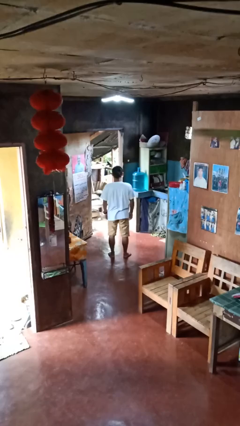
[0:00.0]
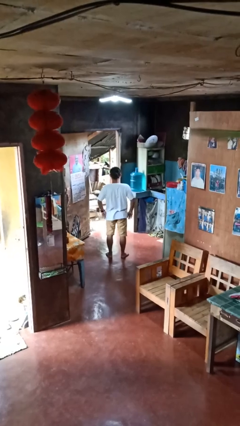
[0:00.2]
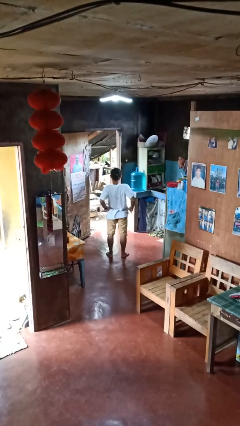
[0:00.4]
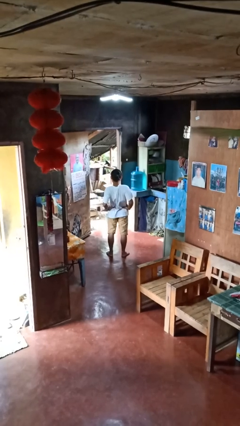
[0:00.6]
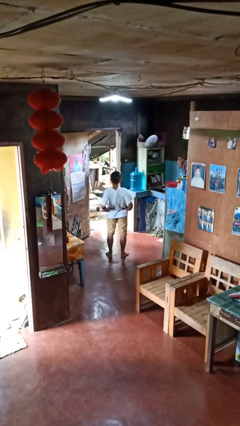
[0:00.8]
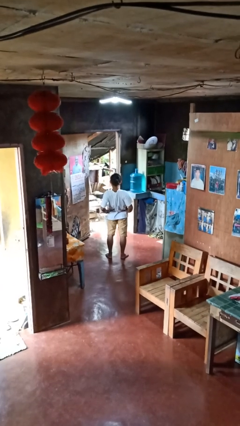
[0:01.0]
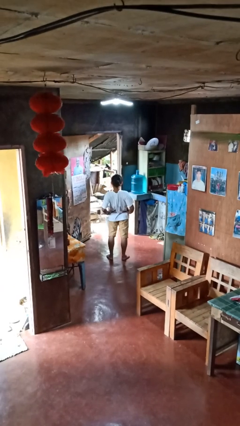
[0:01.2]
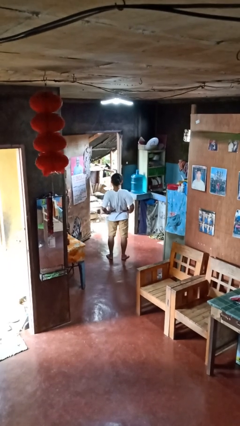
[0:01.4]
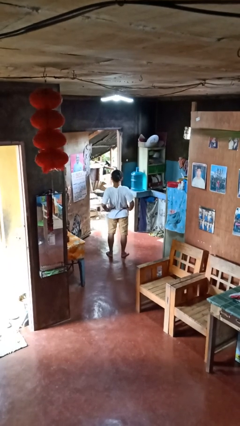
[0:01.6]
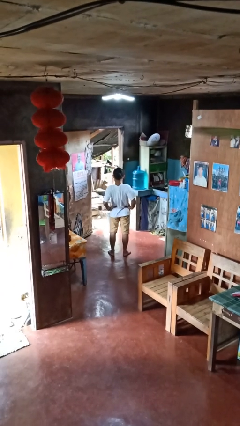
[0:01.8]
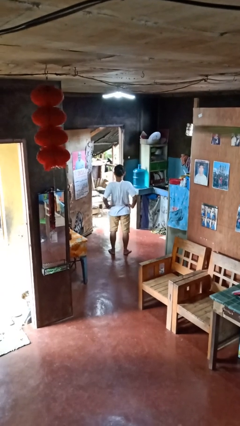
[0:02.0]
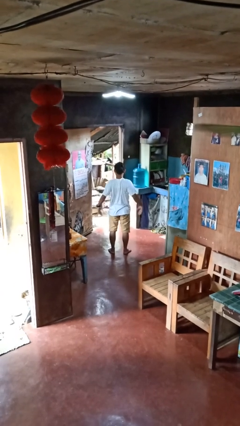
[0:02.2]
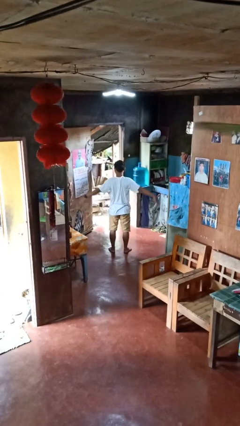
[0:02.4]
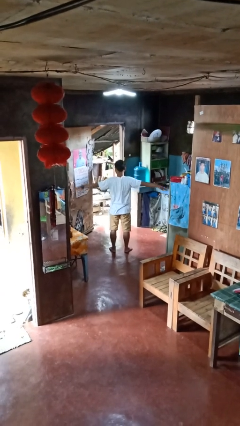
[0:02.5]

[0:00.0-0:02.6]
person stretches back

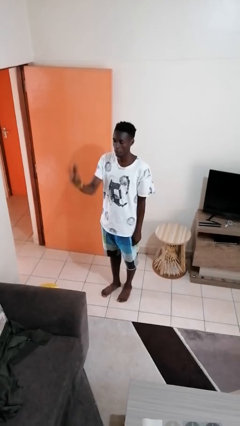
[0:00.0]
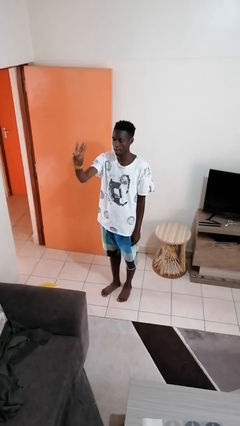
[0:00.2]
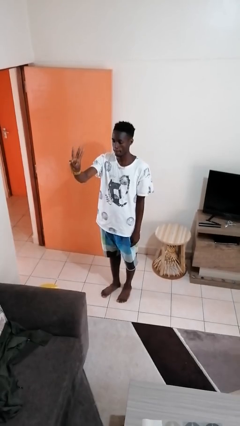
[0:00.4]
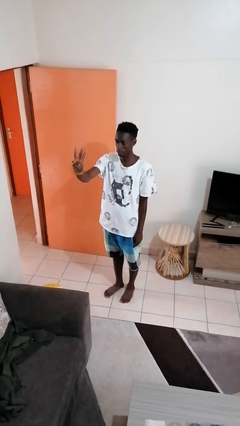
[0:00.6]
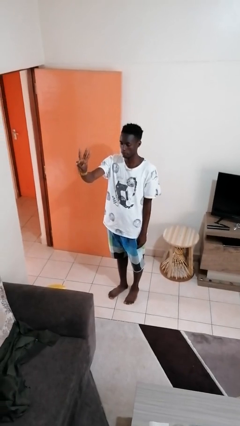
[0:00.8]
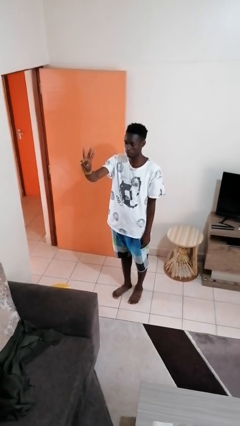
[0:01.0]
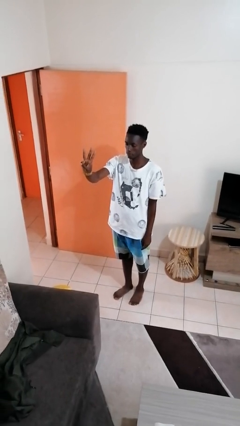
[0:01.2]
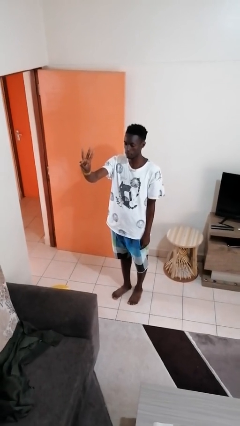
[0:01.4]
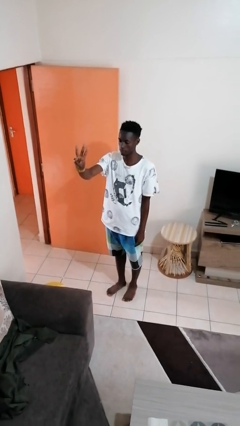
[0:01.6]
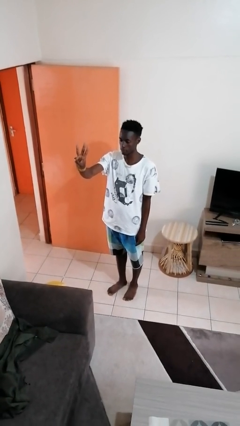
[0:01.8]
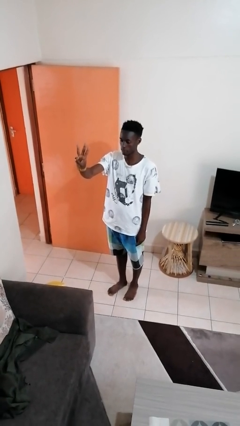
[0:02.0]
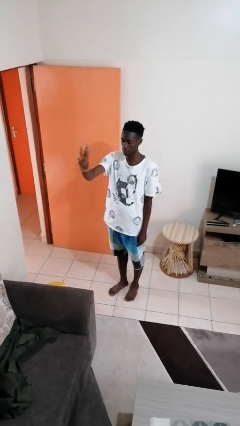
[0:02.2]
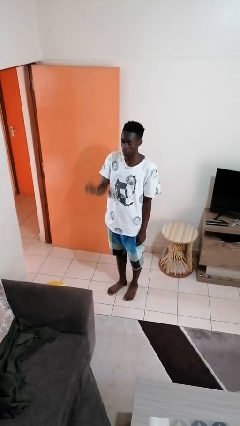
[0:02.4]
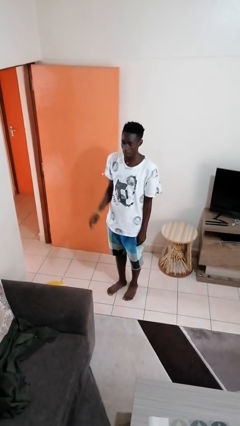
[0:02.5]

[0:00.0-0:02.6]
person gestures number three

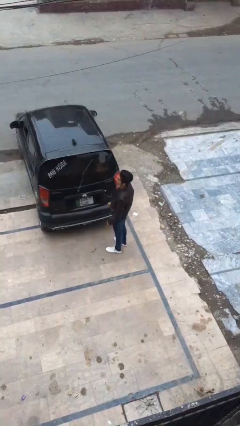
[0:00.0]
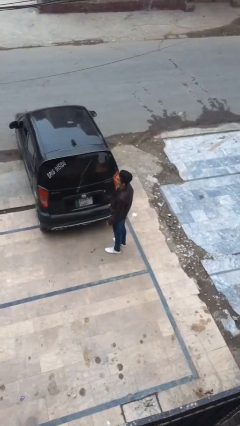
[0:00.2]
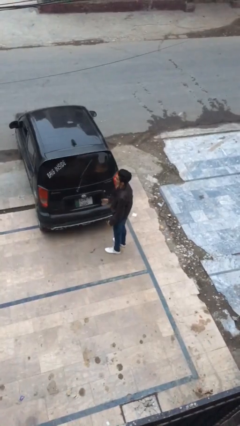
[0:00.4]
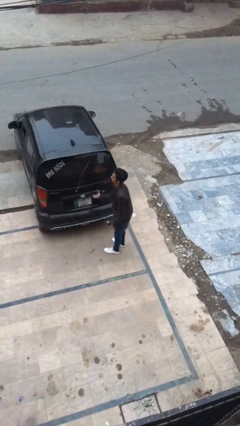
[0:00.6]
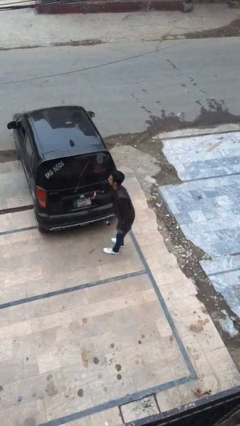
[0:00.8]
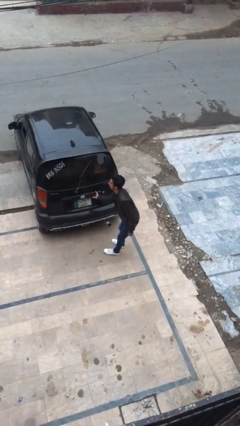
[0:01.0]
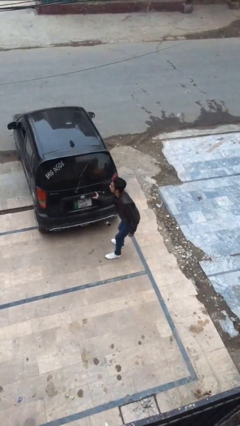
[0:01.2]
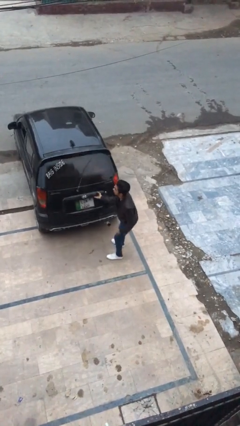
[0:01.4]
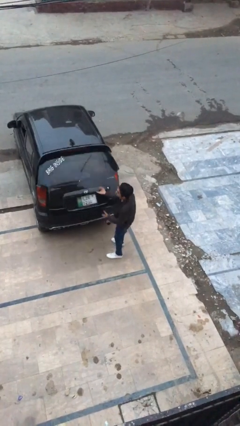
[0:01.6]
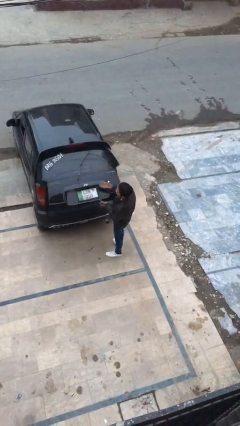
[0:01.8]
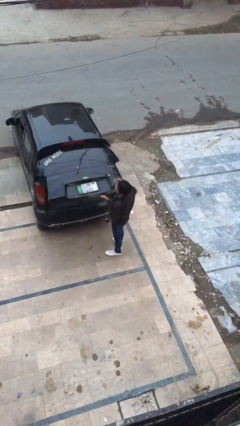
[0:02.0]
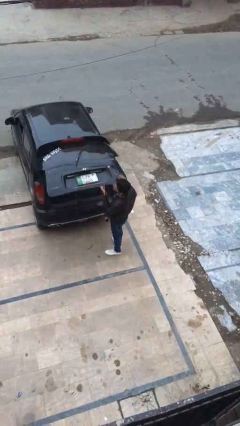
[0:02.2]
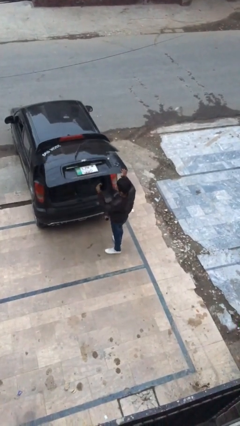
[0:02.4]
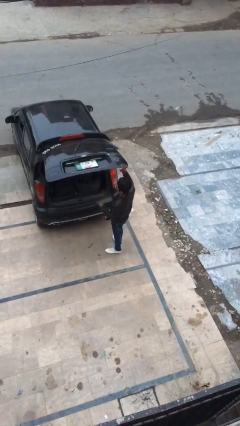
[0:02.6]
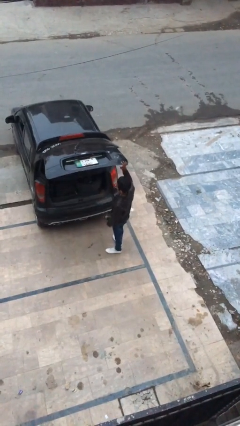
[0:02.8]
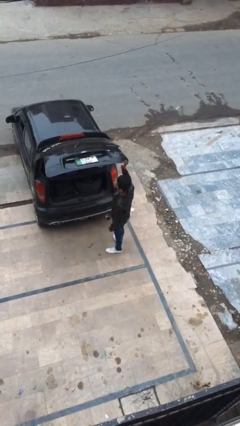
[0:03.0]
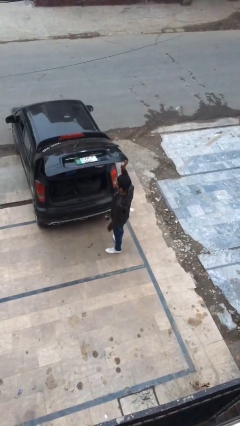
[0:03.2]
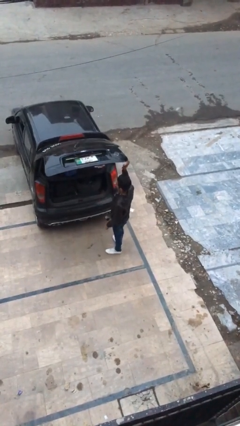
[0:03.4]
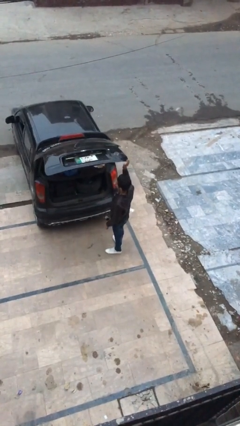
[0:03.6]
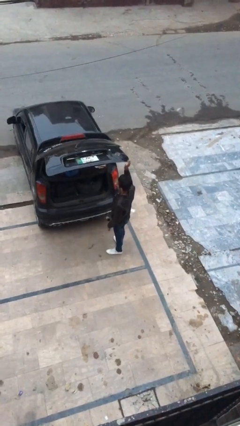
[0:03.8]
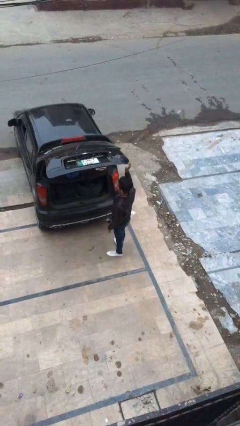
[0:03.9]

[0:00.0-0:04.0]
person opens car trunk

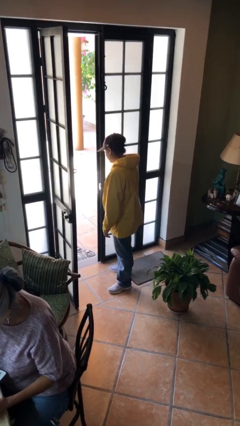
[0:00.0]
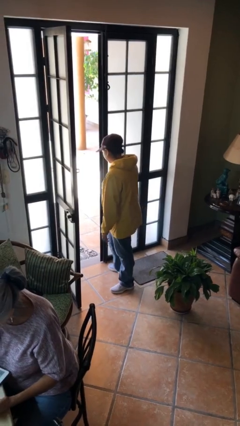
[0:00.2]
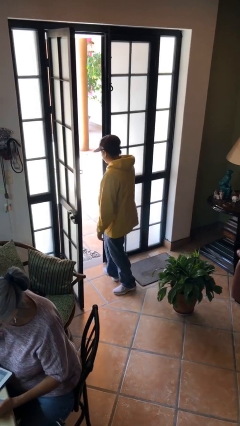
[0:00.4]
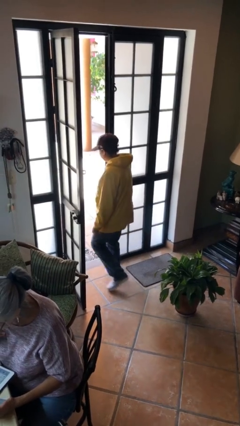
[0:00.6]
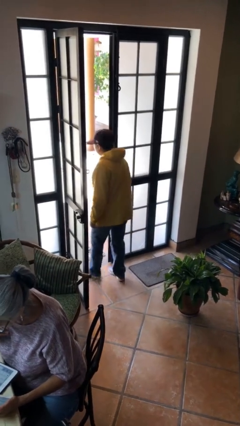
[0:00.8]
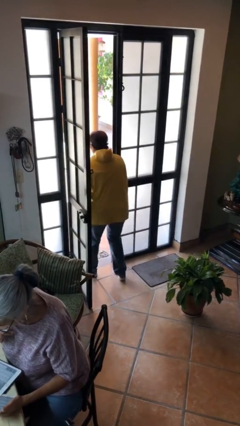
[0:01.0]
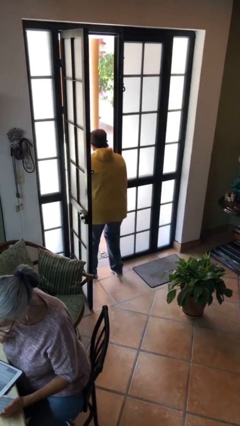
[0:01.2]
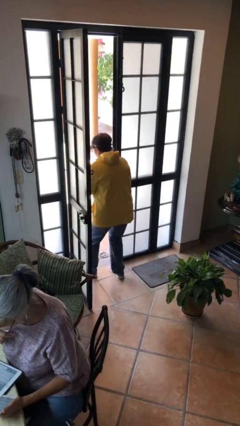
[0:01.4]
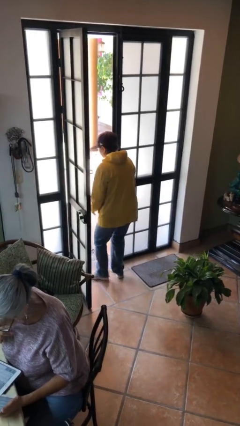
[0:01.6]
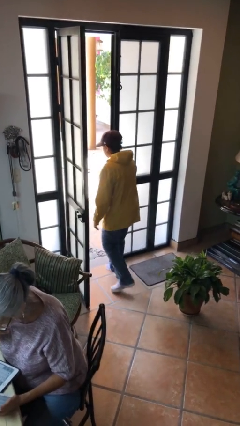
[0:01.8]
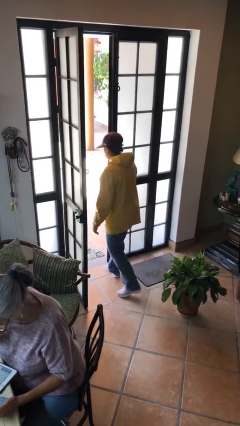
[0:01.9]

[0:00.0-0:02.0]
person bumps into wall

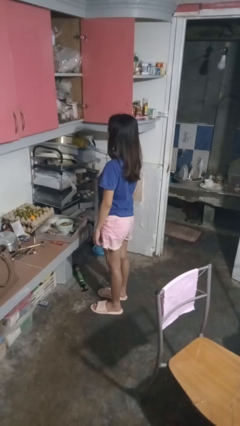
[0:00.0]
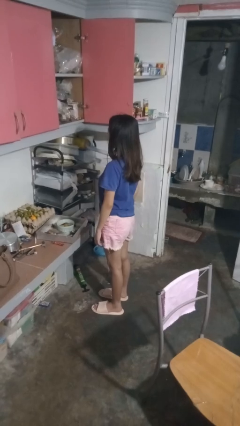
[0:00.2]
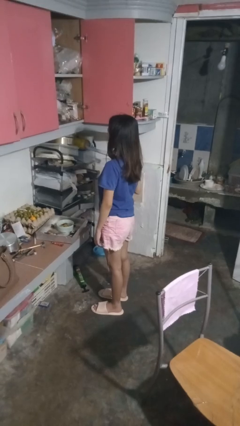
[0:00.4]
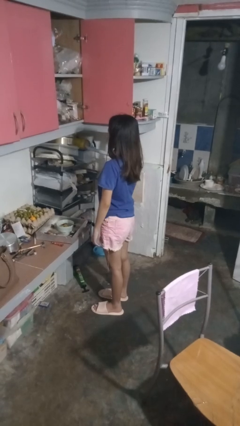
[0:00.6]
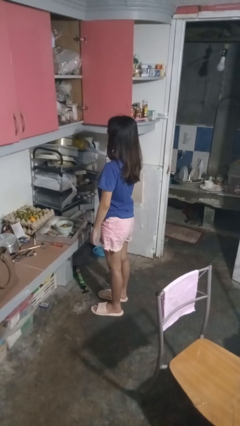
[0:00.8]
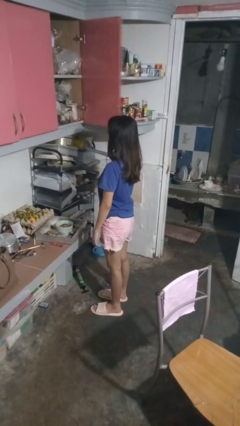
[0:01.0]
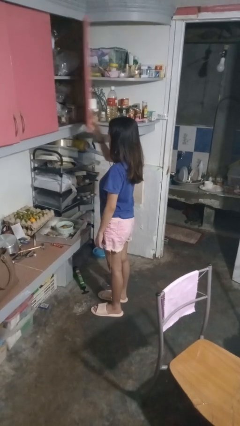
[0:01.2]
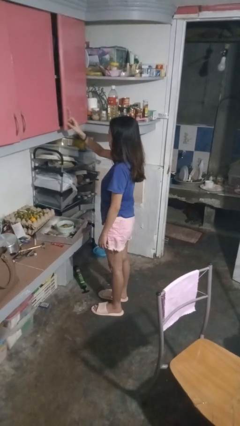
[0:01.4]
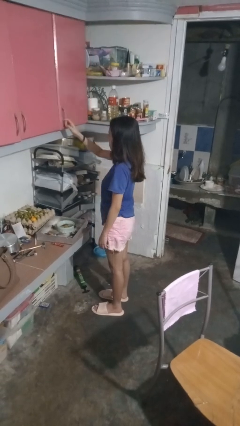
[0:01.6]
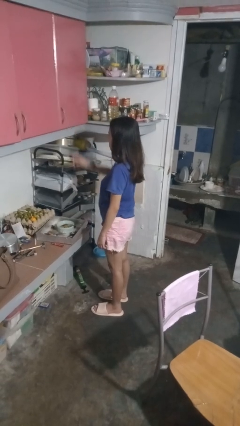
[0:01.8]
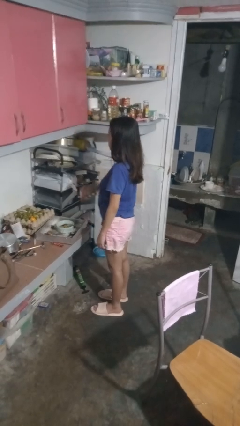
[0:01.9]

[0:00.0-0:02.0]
person closes cabinet

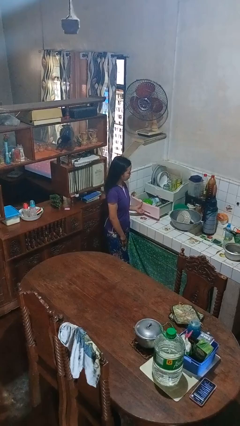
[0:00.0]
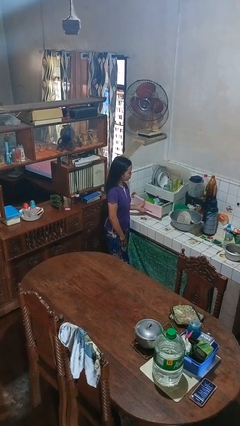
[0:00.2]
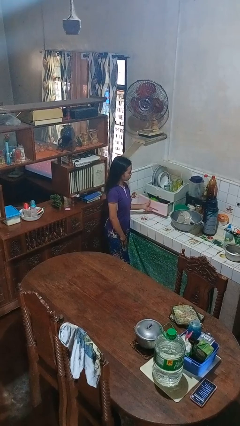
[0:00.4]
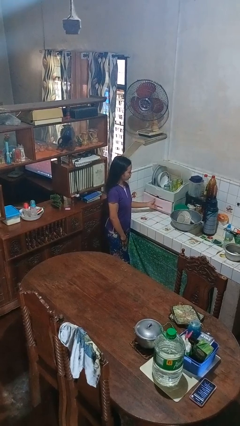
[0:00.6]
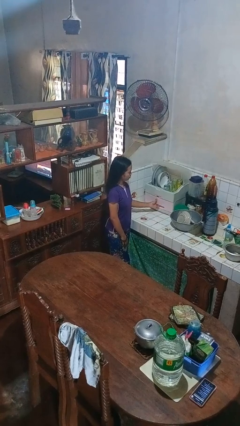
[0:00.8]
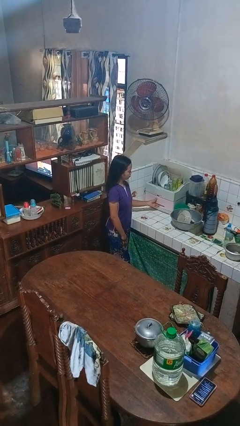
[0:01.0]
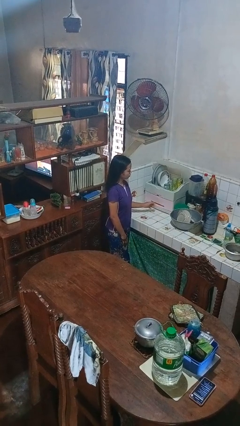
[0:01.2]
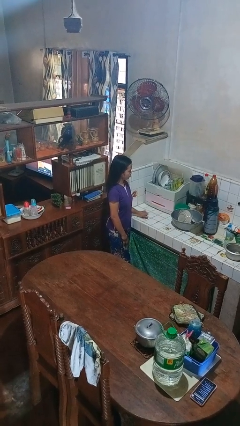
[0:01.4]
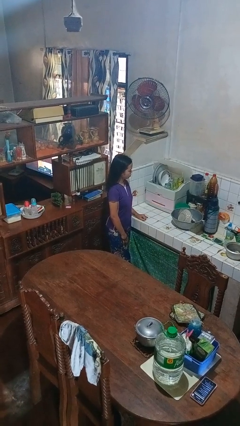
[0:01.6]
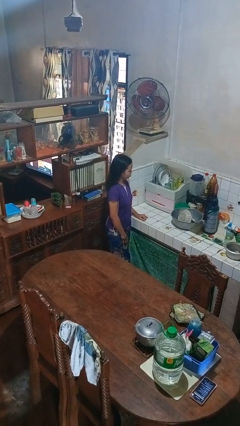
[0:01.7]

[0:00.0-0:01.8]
person closes kitchen drawer

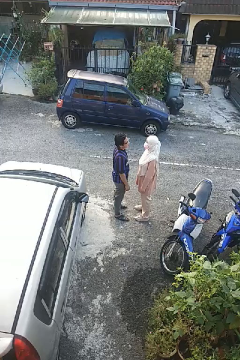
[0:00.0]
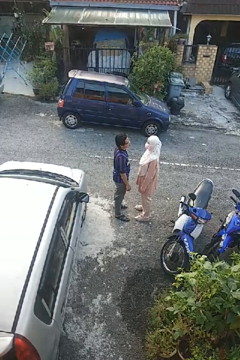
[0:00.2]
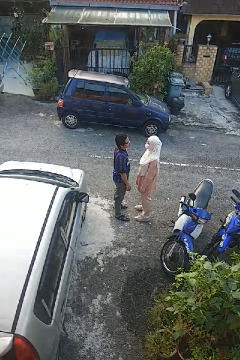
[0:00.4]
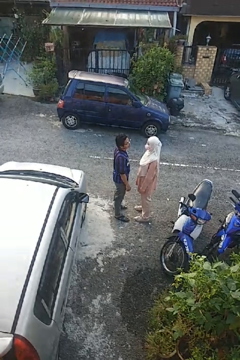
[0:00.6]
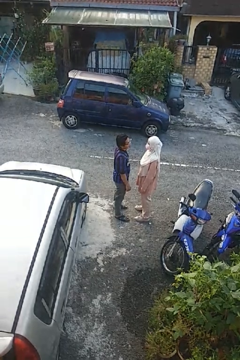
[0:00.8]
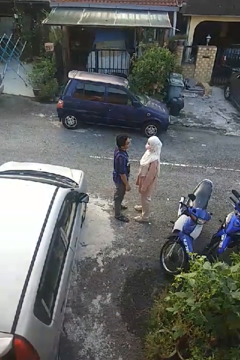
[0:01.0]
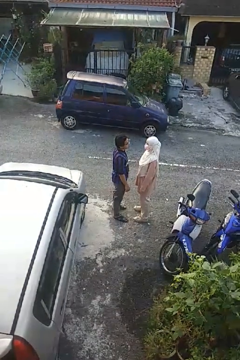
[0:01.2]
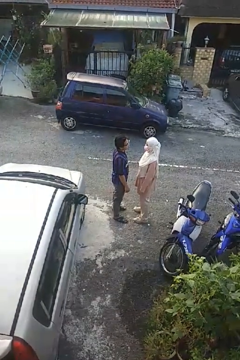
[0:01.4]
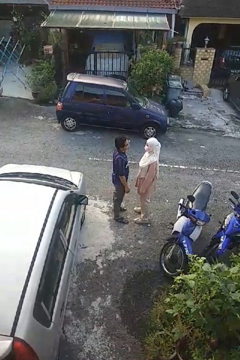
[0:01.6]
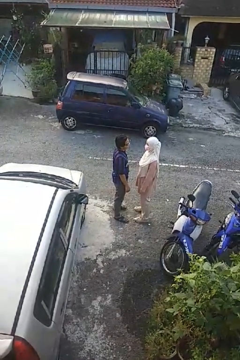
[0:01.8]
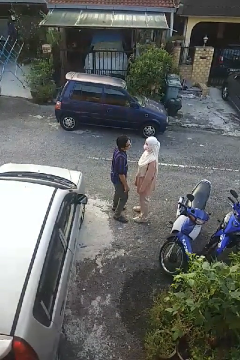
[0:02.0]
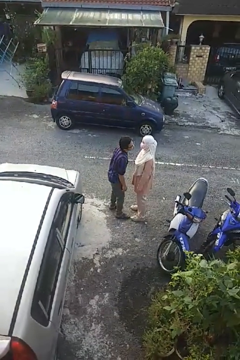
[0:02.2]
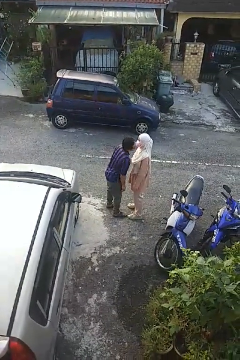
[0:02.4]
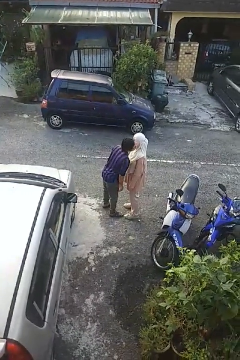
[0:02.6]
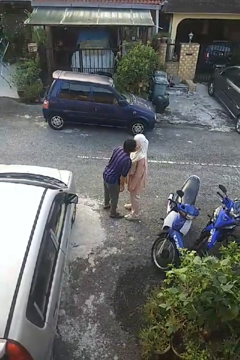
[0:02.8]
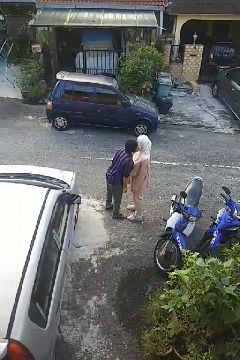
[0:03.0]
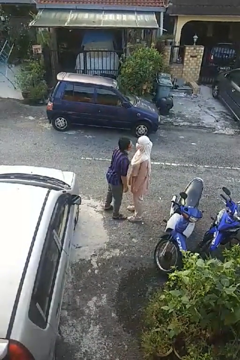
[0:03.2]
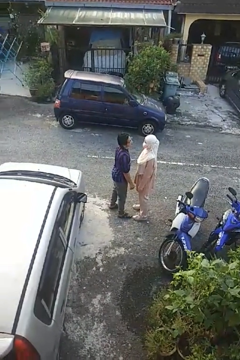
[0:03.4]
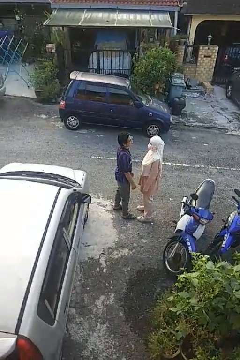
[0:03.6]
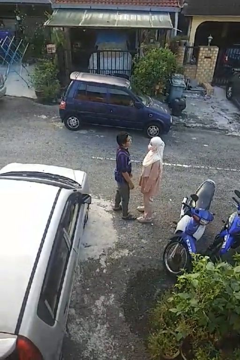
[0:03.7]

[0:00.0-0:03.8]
person kisses cheek of person
